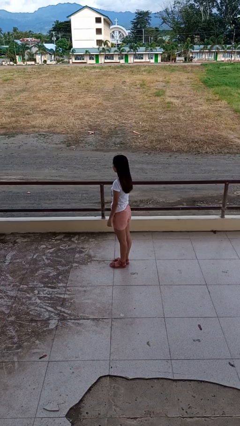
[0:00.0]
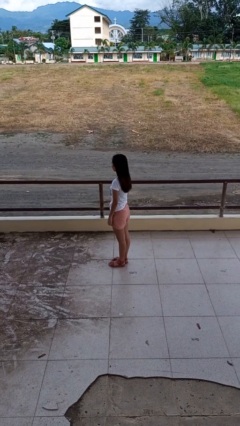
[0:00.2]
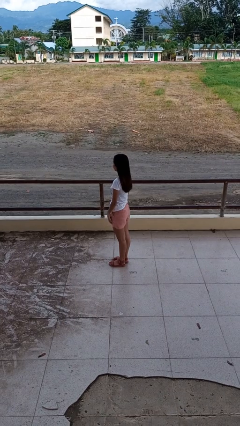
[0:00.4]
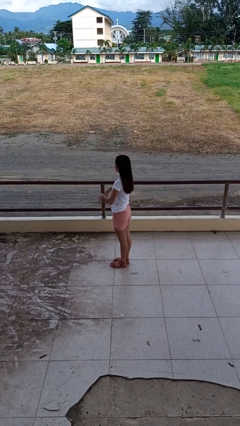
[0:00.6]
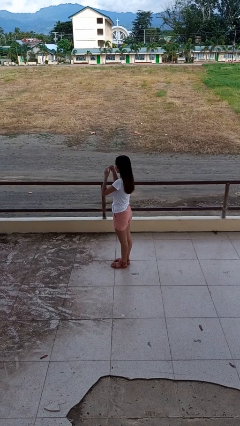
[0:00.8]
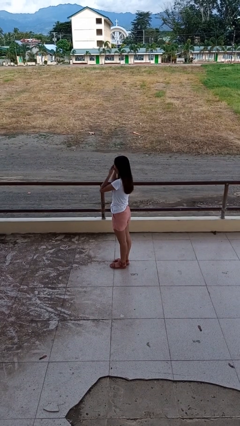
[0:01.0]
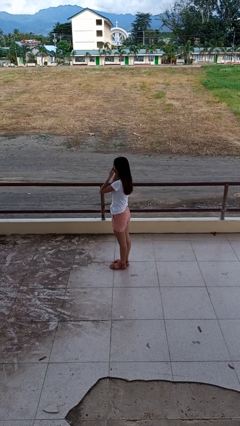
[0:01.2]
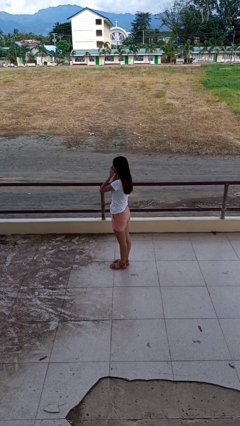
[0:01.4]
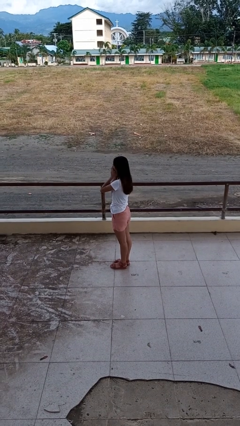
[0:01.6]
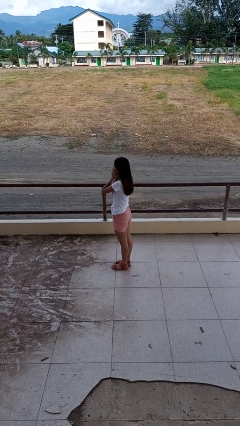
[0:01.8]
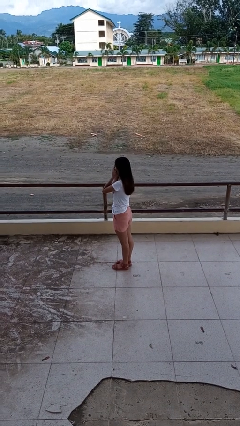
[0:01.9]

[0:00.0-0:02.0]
person rubs eyes

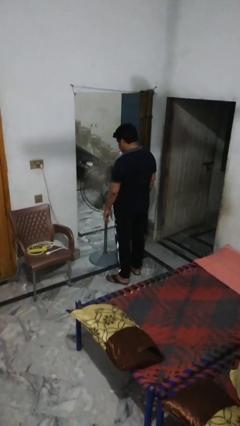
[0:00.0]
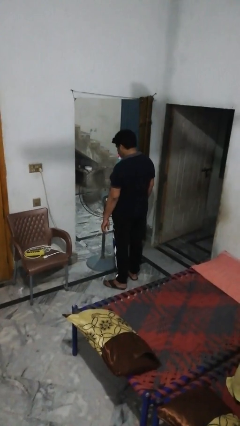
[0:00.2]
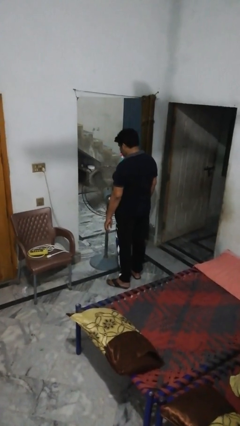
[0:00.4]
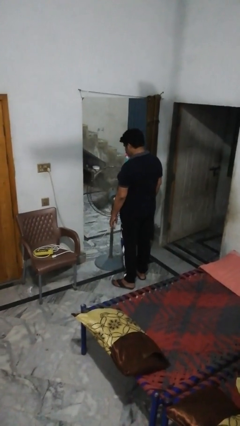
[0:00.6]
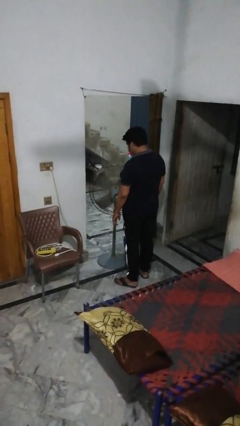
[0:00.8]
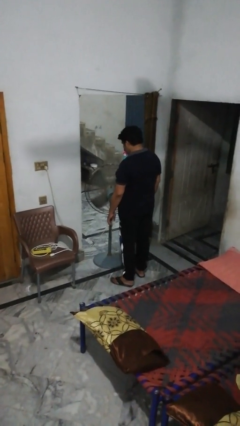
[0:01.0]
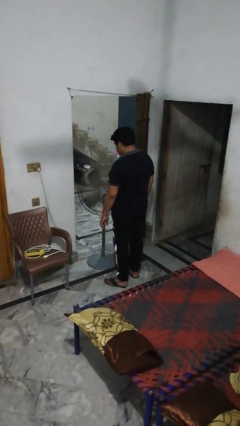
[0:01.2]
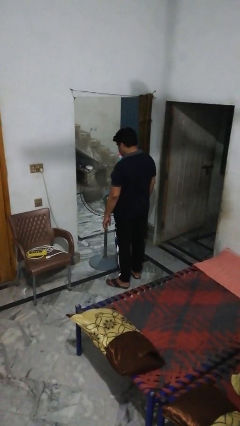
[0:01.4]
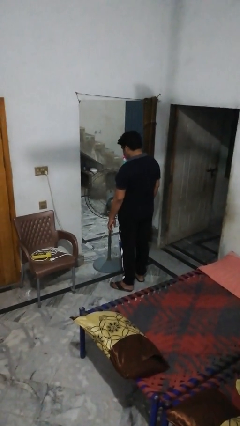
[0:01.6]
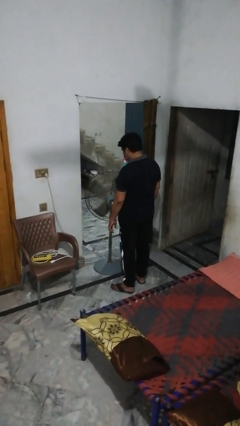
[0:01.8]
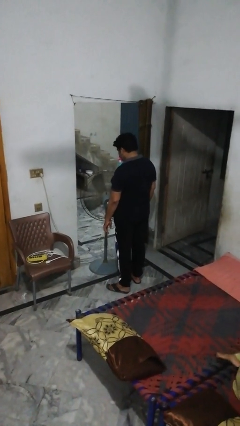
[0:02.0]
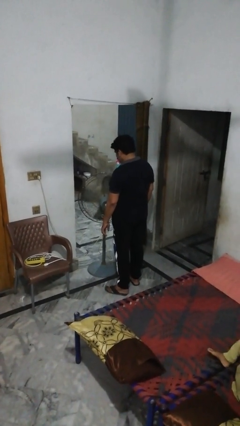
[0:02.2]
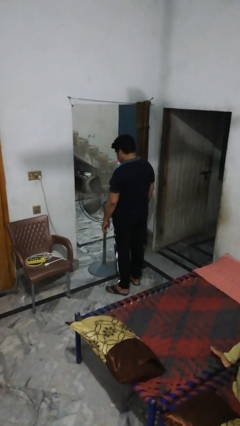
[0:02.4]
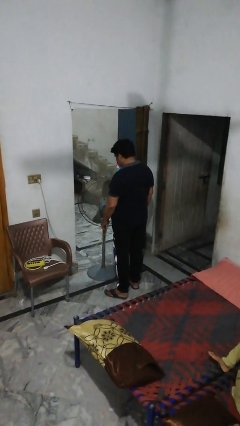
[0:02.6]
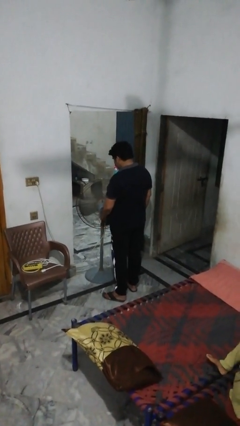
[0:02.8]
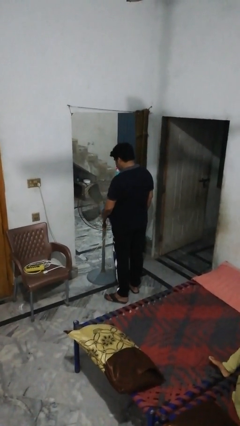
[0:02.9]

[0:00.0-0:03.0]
person turns off fan

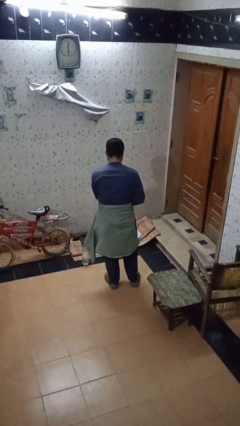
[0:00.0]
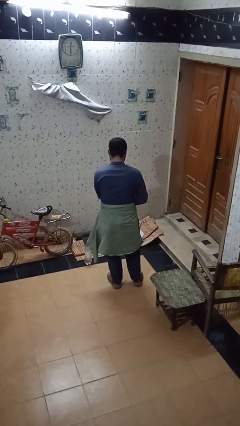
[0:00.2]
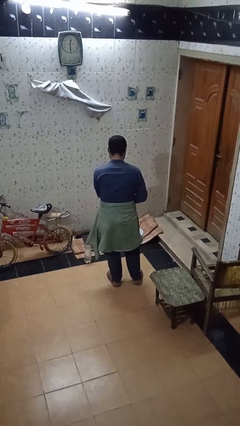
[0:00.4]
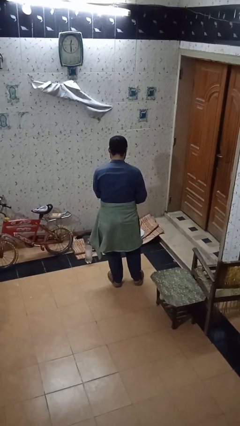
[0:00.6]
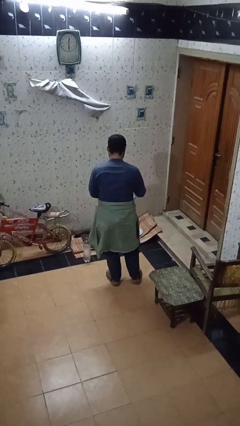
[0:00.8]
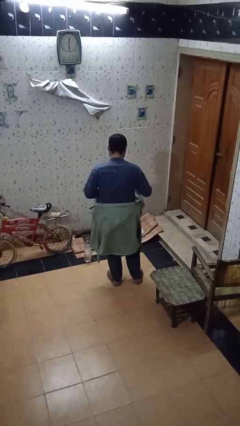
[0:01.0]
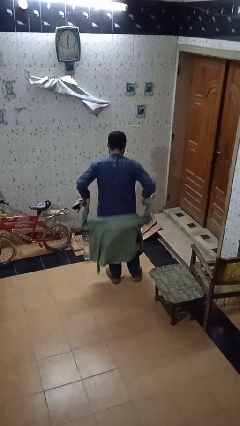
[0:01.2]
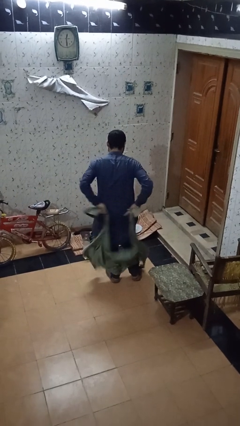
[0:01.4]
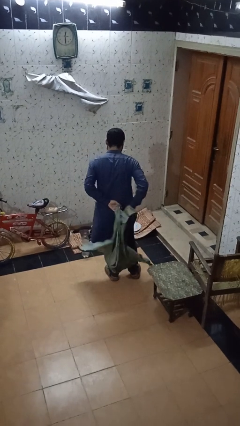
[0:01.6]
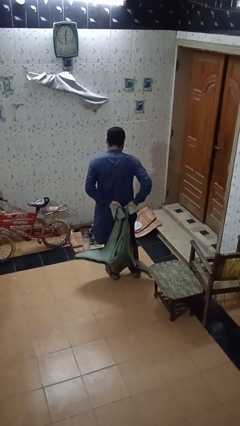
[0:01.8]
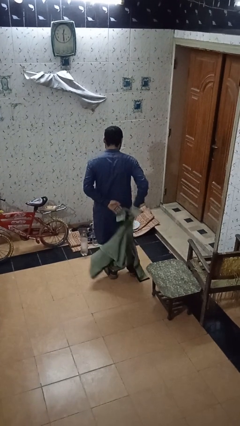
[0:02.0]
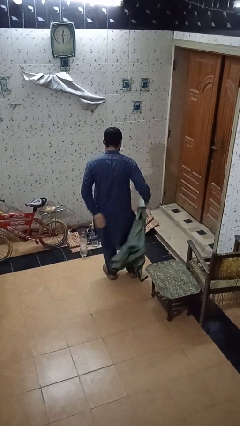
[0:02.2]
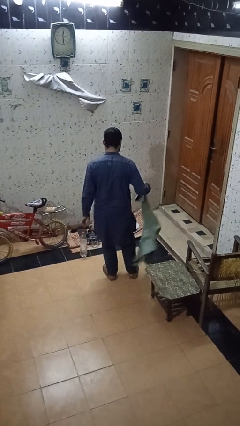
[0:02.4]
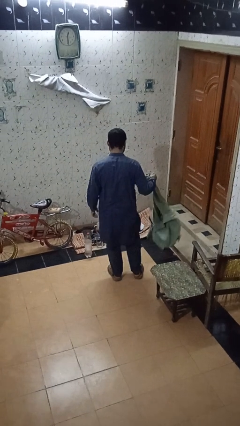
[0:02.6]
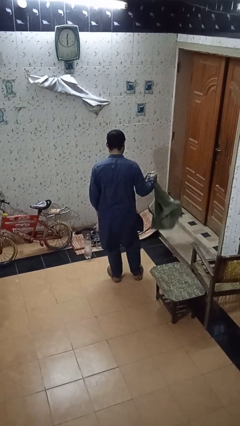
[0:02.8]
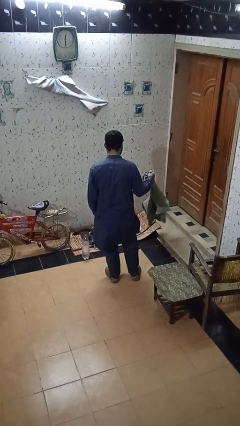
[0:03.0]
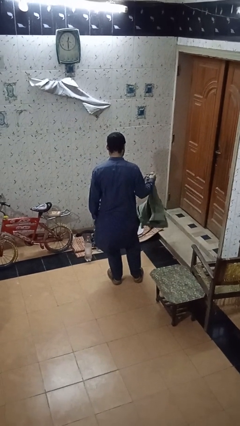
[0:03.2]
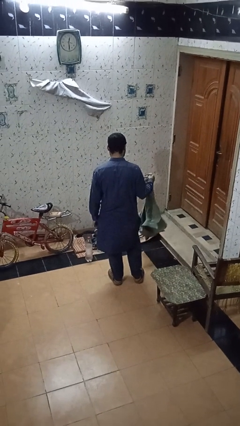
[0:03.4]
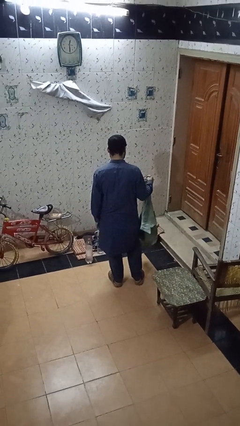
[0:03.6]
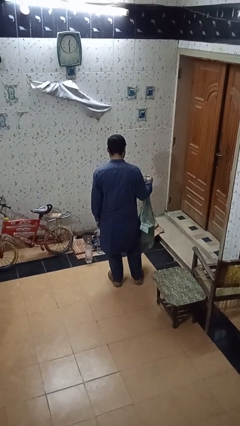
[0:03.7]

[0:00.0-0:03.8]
person unties jacket around waist

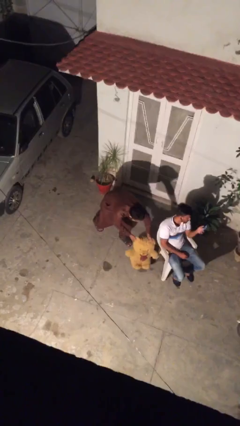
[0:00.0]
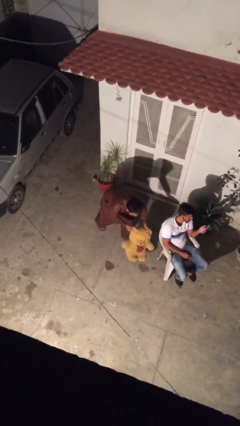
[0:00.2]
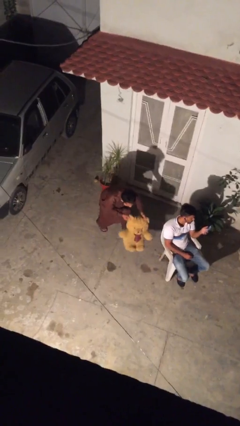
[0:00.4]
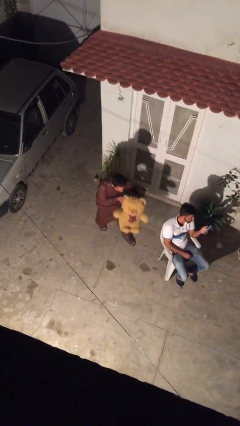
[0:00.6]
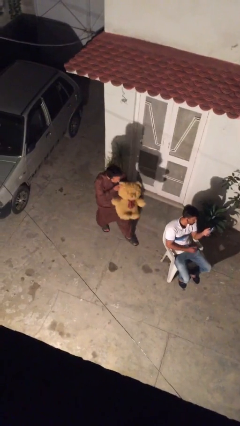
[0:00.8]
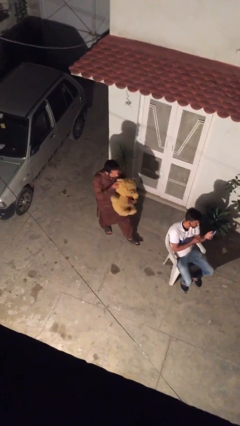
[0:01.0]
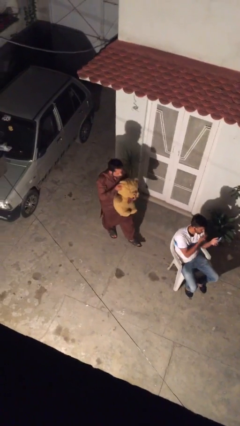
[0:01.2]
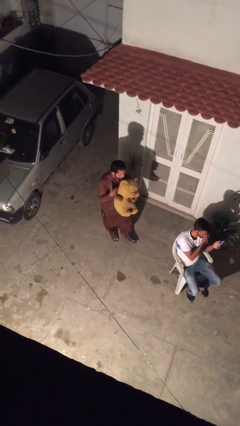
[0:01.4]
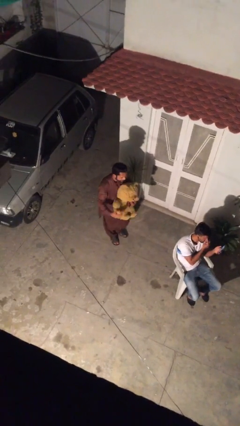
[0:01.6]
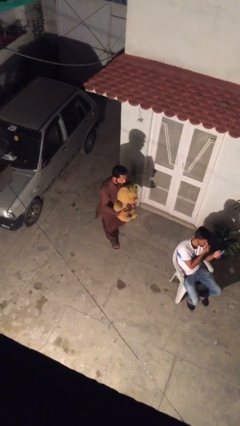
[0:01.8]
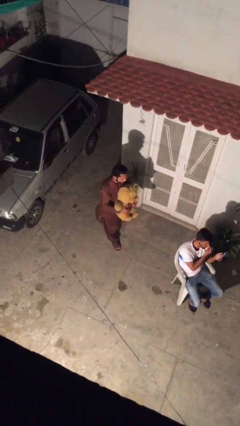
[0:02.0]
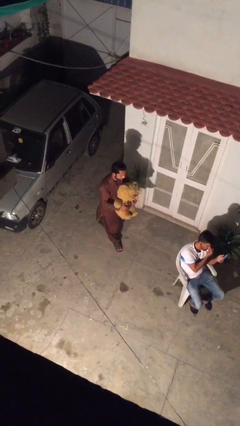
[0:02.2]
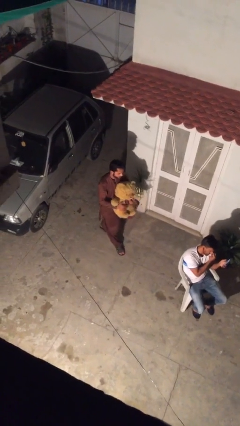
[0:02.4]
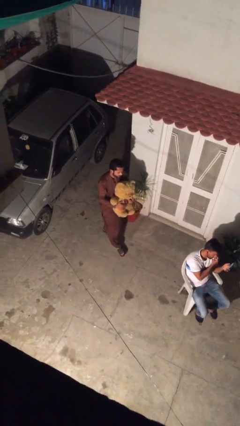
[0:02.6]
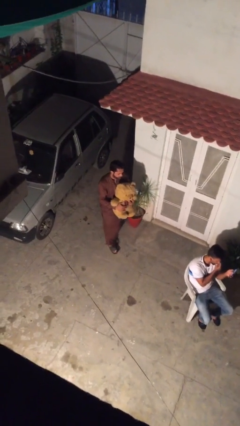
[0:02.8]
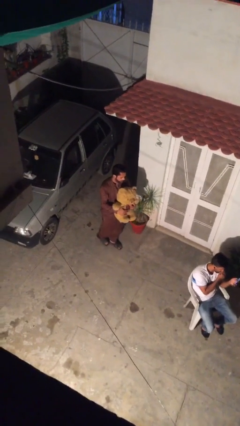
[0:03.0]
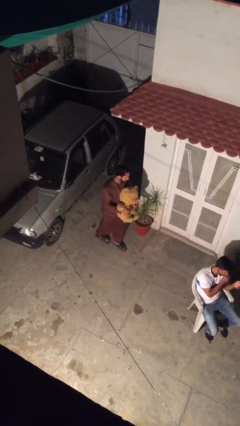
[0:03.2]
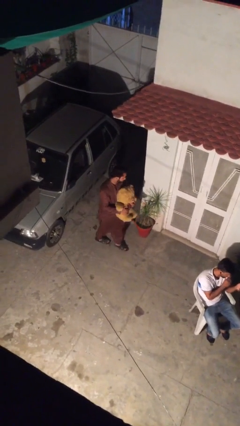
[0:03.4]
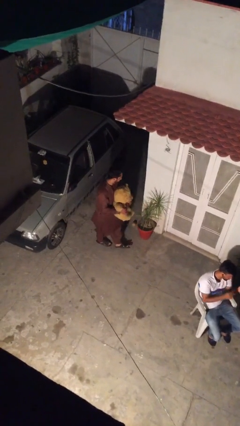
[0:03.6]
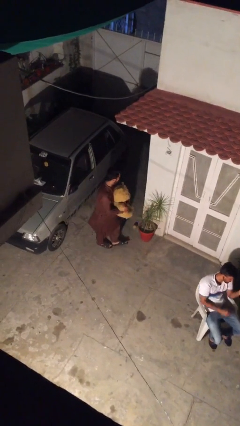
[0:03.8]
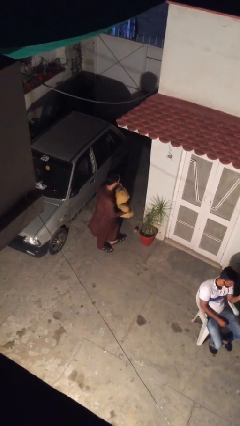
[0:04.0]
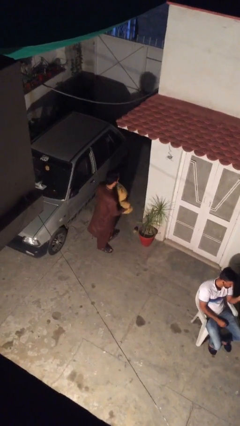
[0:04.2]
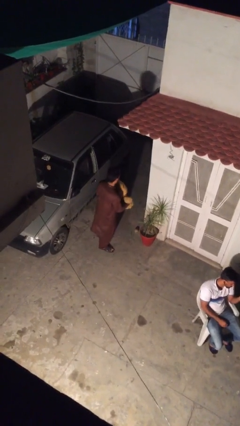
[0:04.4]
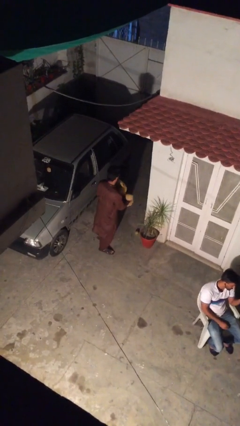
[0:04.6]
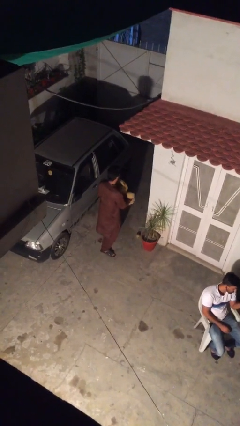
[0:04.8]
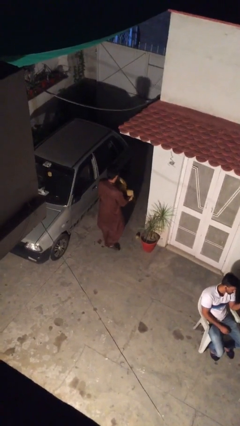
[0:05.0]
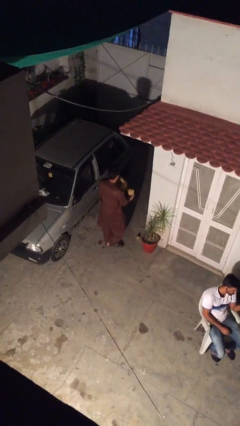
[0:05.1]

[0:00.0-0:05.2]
person steals object from person

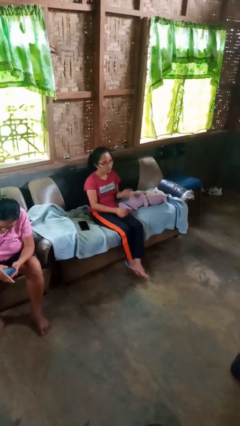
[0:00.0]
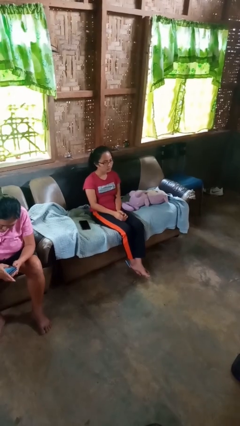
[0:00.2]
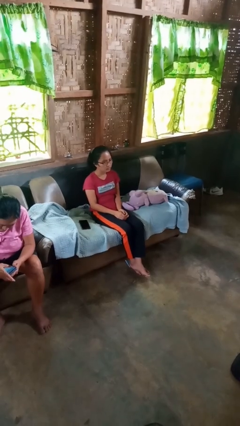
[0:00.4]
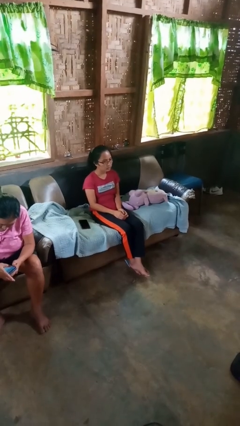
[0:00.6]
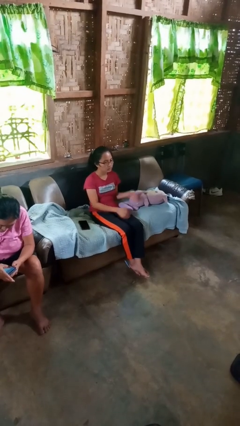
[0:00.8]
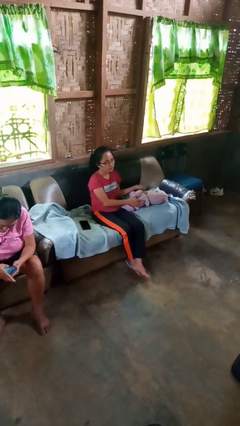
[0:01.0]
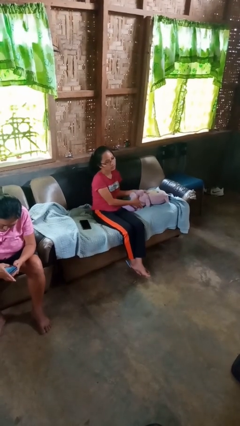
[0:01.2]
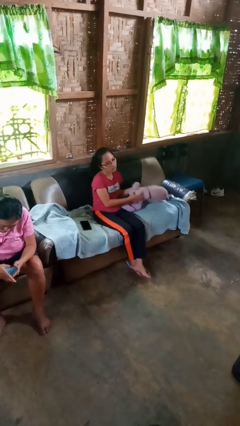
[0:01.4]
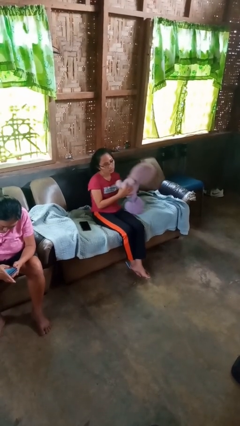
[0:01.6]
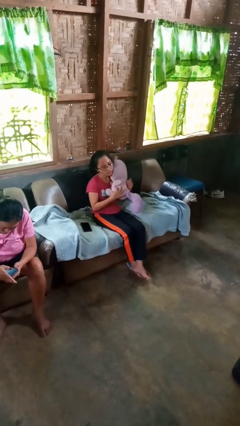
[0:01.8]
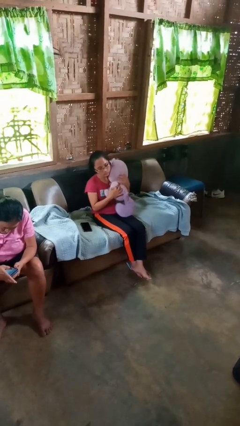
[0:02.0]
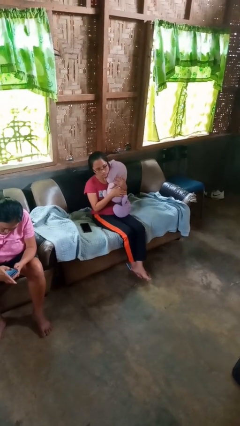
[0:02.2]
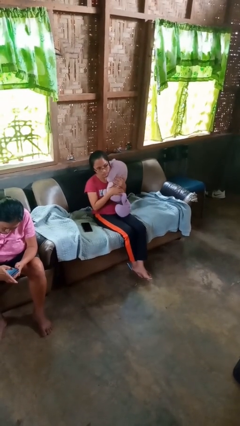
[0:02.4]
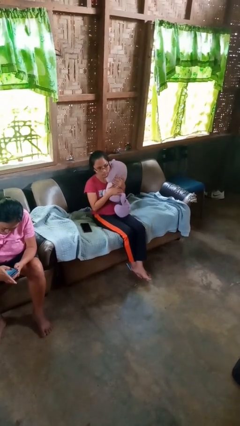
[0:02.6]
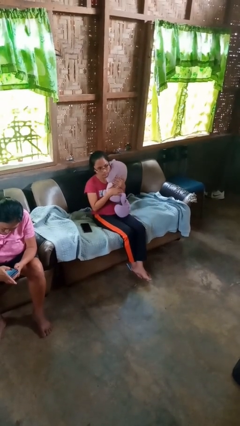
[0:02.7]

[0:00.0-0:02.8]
person hugs stuffed animal

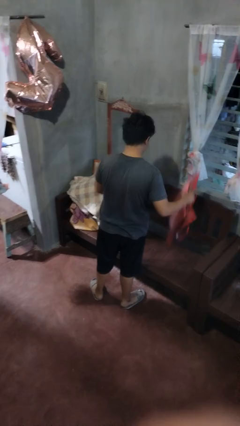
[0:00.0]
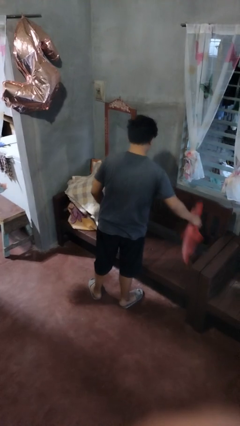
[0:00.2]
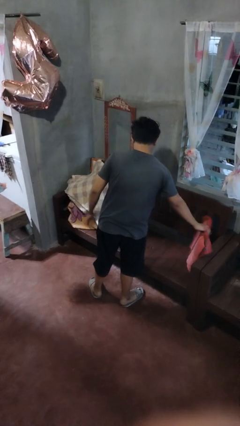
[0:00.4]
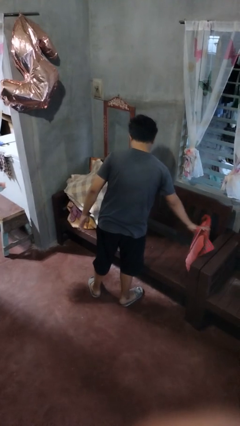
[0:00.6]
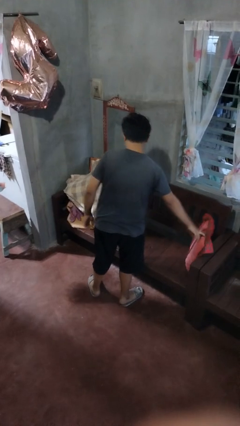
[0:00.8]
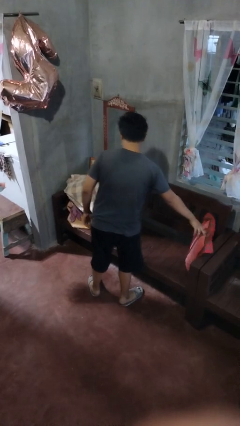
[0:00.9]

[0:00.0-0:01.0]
person puts down object on couch
